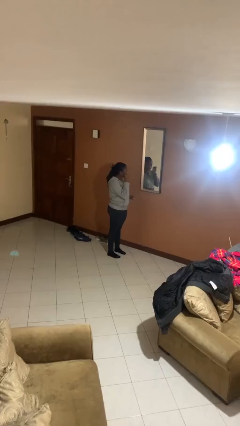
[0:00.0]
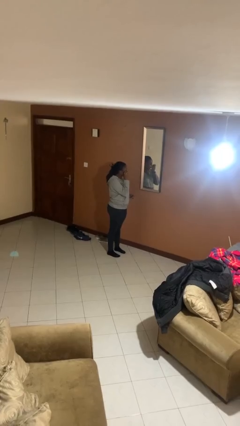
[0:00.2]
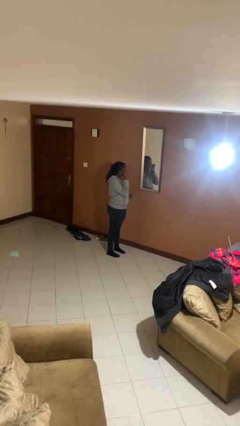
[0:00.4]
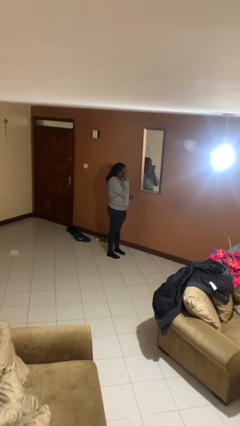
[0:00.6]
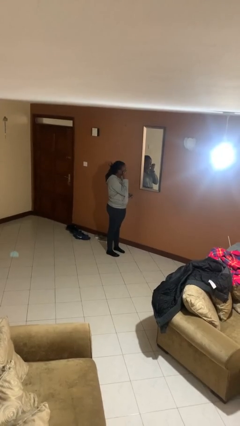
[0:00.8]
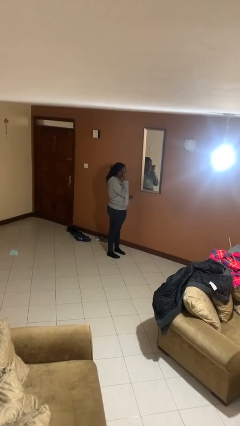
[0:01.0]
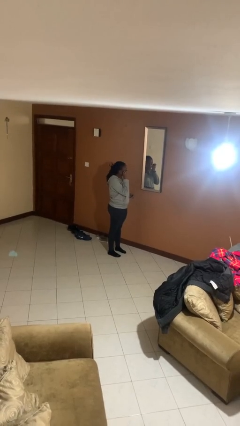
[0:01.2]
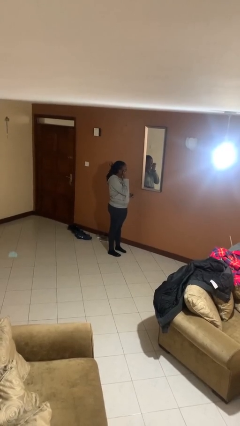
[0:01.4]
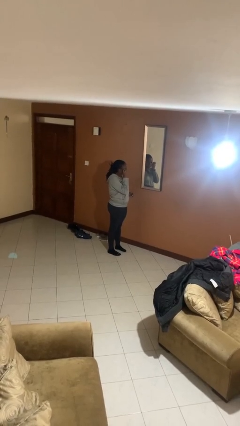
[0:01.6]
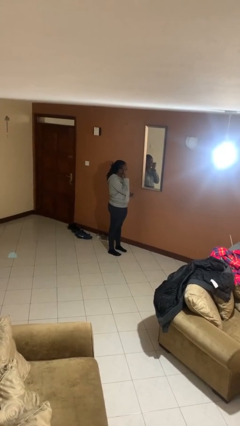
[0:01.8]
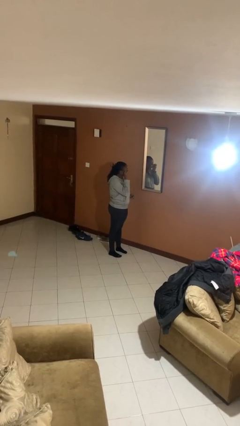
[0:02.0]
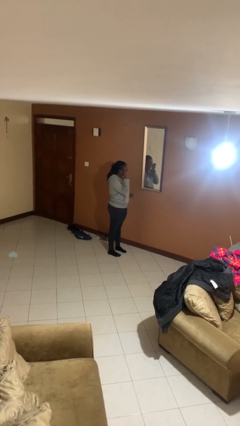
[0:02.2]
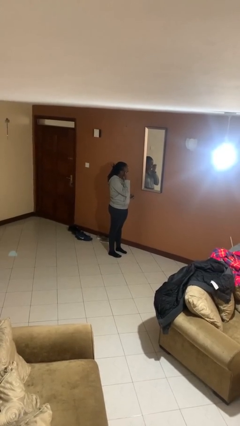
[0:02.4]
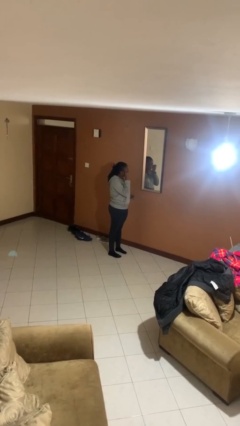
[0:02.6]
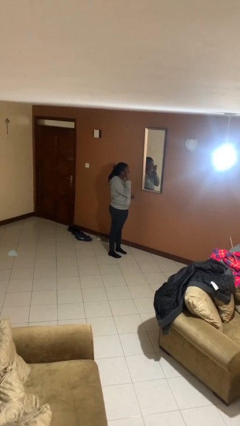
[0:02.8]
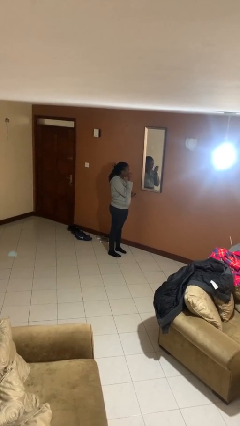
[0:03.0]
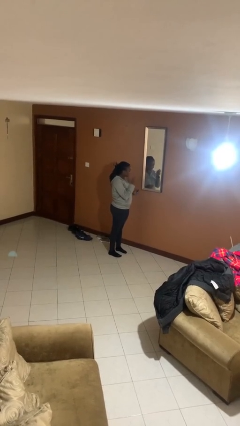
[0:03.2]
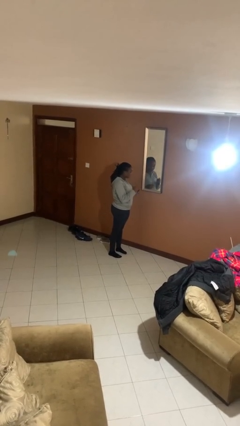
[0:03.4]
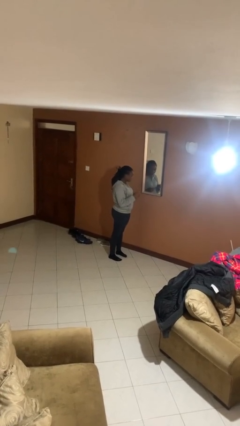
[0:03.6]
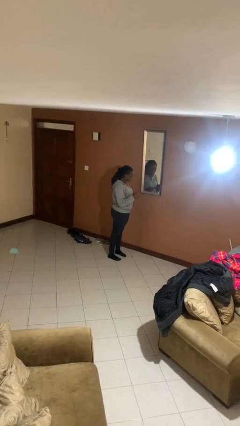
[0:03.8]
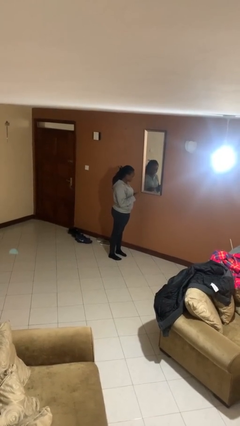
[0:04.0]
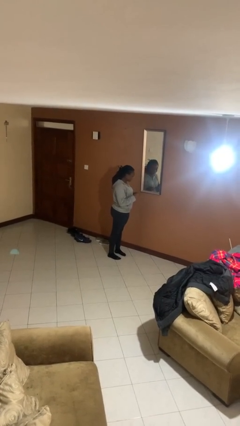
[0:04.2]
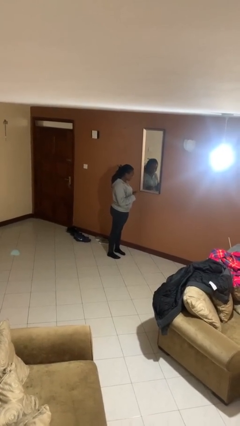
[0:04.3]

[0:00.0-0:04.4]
person applies eye makeup

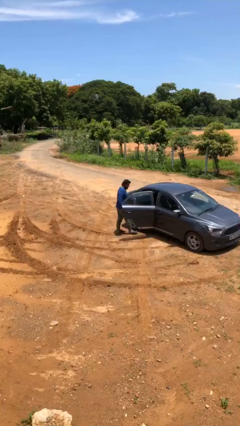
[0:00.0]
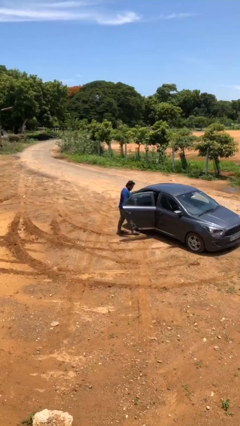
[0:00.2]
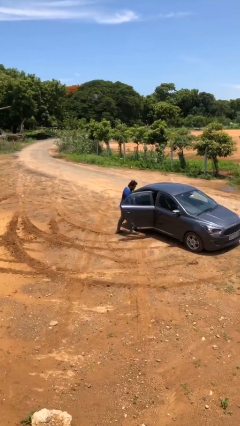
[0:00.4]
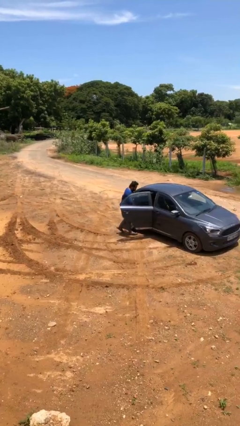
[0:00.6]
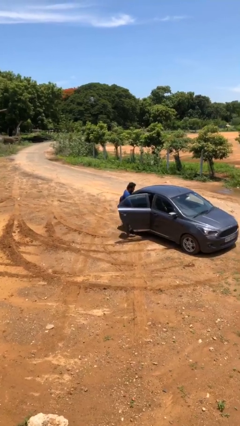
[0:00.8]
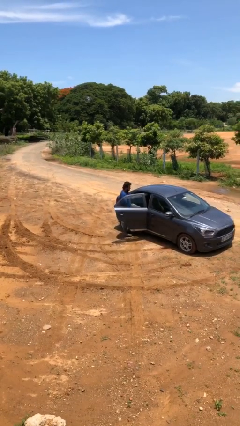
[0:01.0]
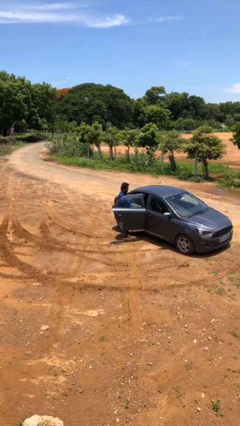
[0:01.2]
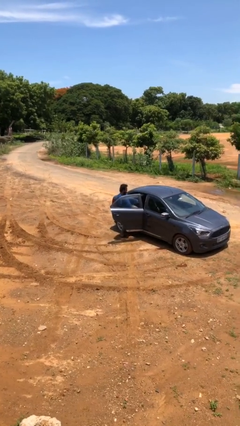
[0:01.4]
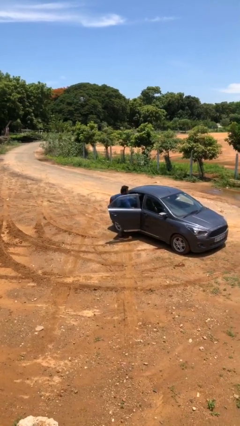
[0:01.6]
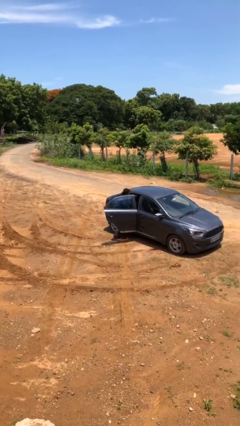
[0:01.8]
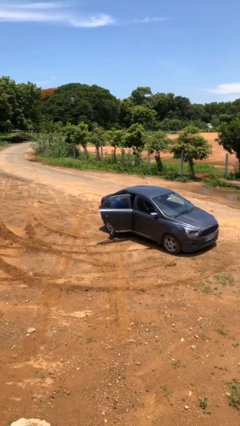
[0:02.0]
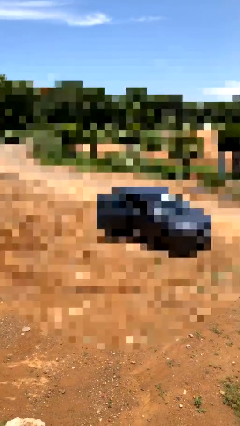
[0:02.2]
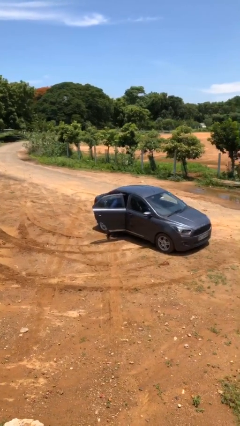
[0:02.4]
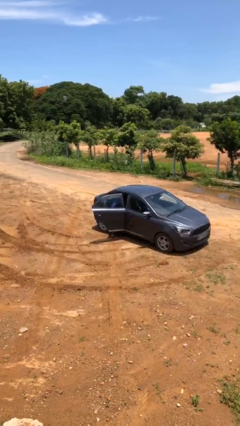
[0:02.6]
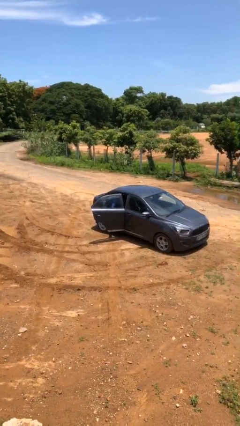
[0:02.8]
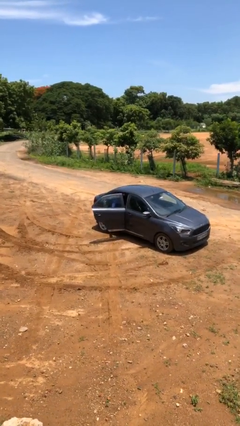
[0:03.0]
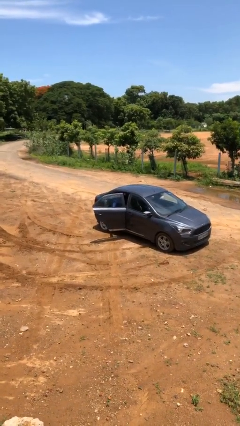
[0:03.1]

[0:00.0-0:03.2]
person enters car

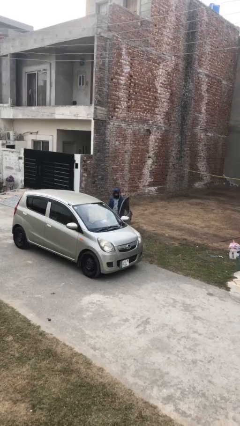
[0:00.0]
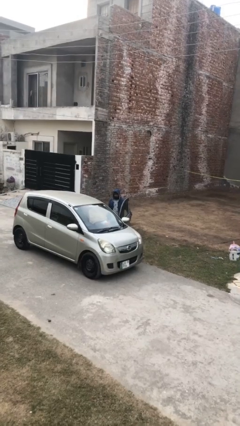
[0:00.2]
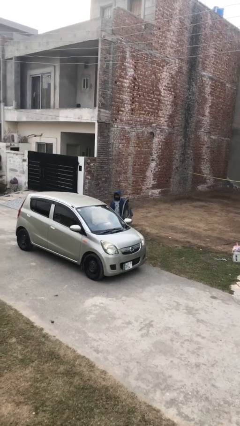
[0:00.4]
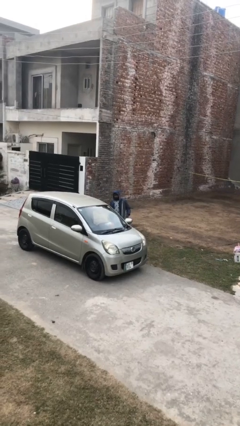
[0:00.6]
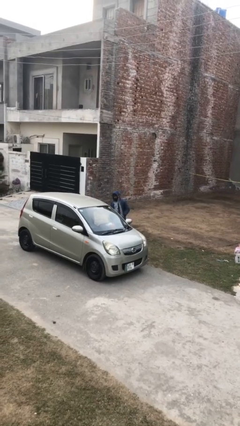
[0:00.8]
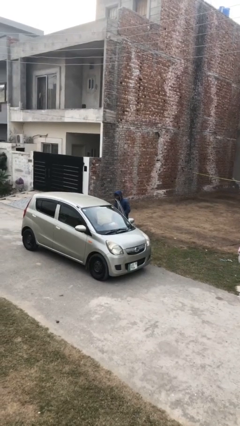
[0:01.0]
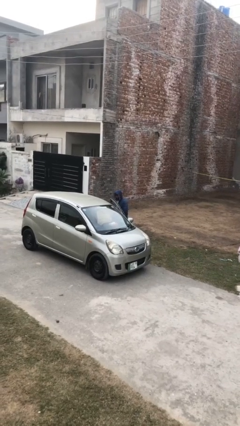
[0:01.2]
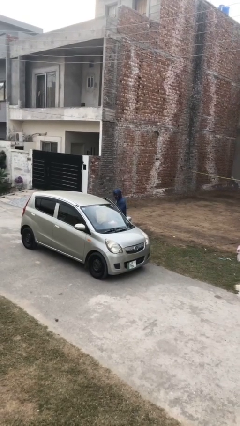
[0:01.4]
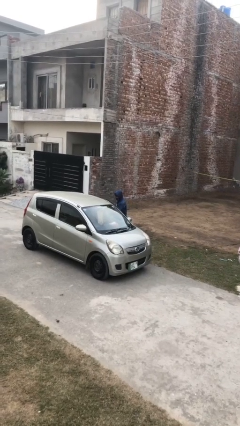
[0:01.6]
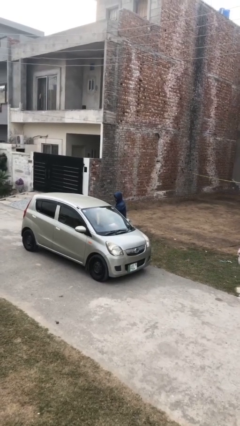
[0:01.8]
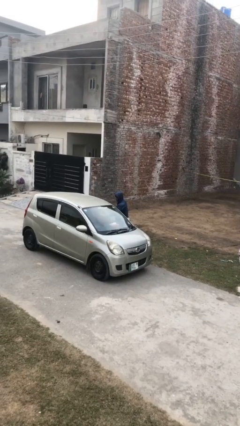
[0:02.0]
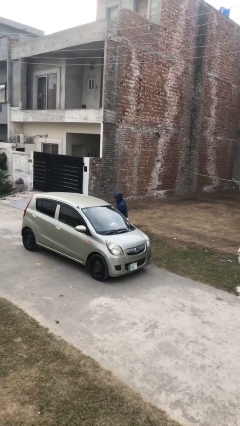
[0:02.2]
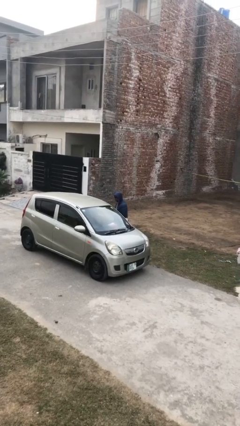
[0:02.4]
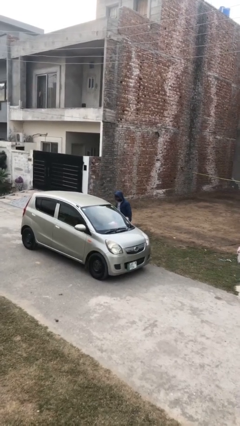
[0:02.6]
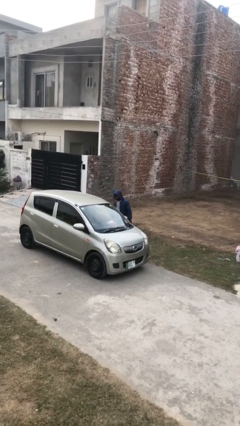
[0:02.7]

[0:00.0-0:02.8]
person closes car door

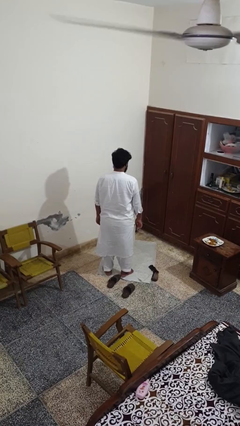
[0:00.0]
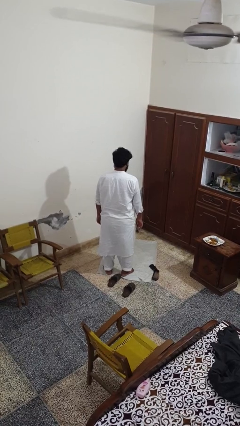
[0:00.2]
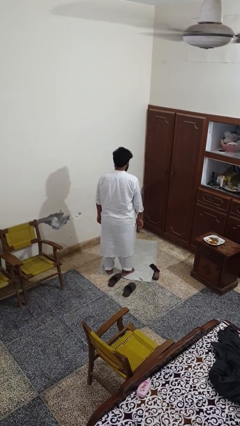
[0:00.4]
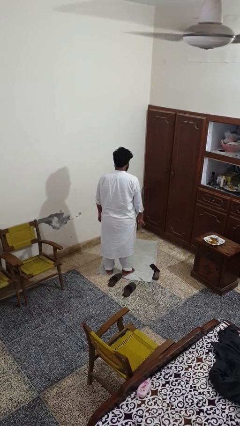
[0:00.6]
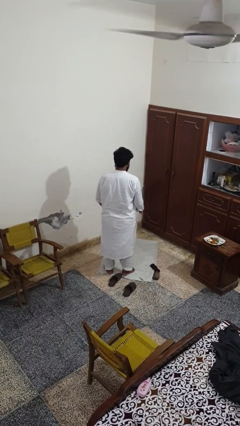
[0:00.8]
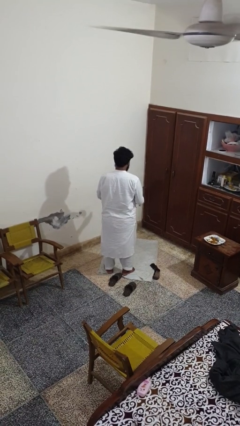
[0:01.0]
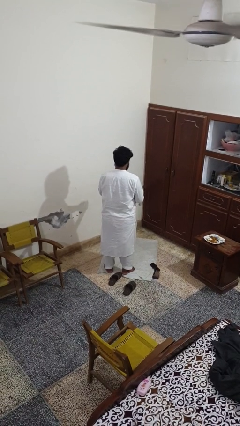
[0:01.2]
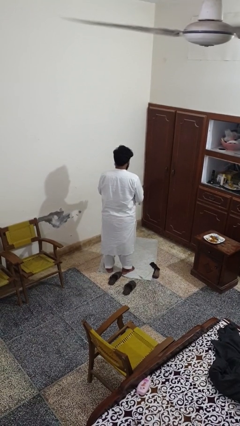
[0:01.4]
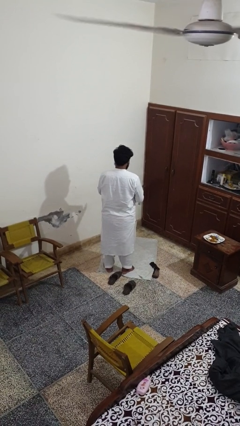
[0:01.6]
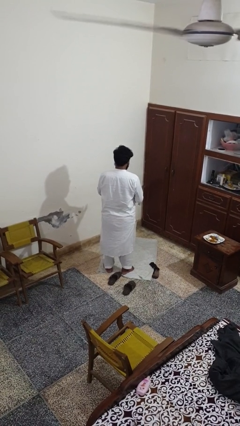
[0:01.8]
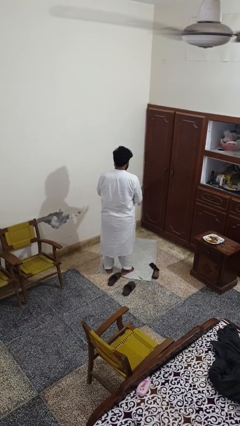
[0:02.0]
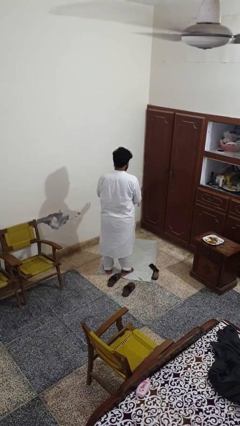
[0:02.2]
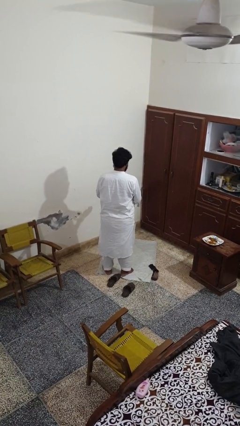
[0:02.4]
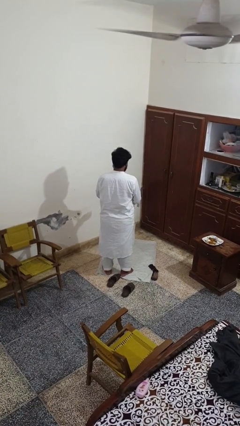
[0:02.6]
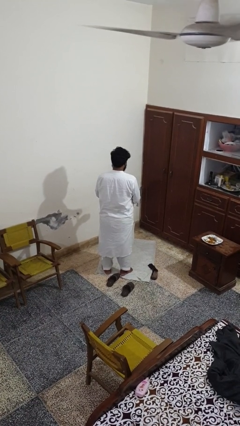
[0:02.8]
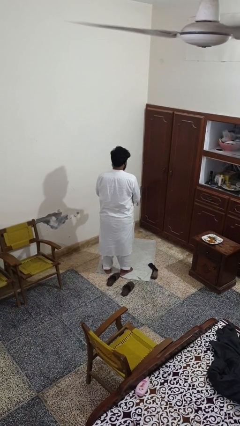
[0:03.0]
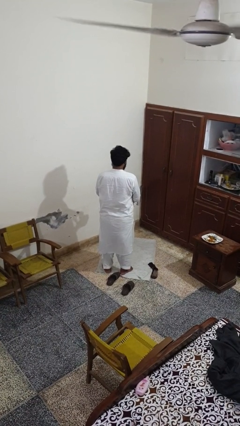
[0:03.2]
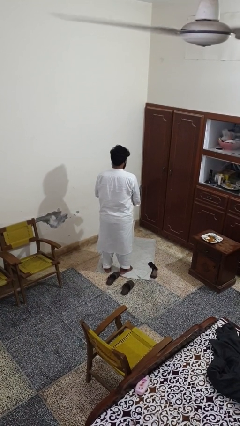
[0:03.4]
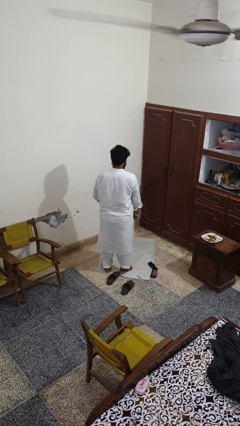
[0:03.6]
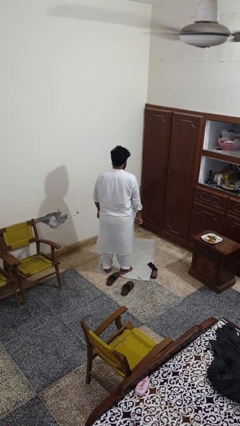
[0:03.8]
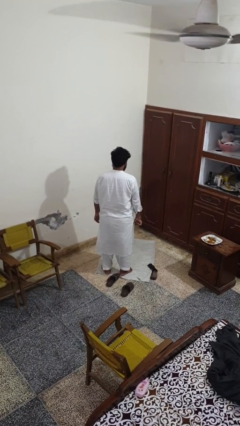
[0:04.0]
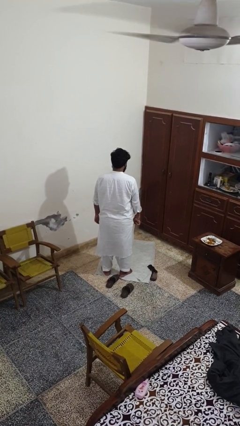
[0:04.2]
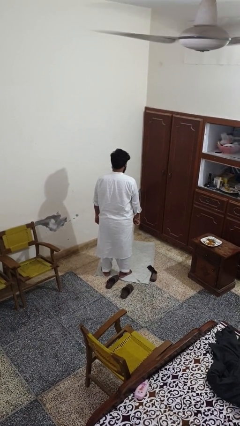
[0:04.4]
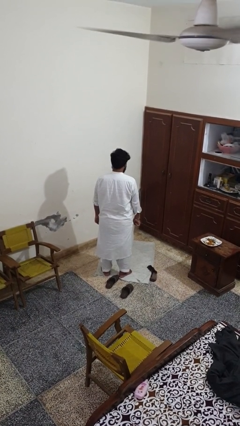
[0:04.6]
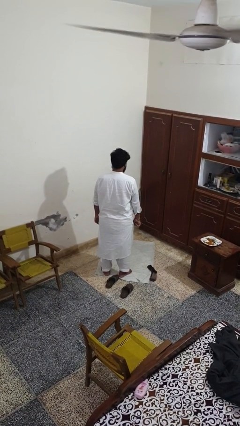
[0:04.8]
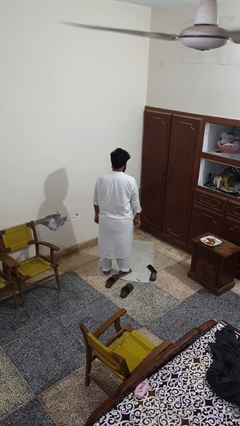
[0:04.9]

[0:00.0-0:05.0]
person puts on wristwatch

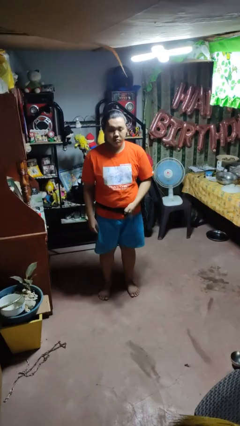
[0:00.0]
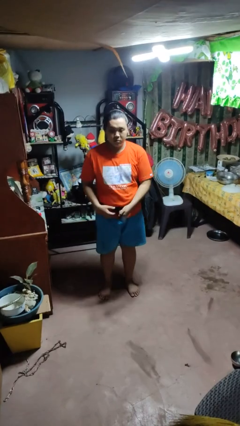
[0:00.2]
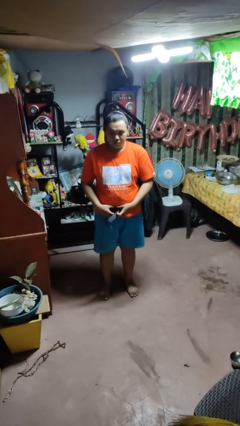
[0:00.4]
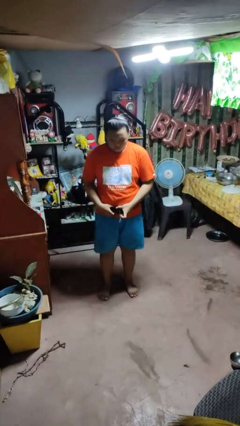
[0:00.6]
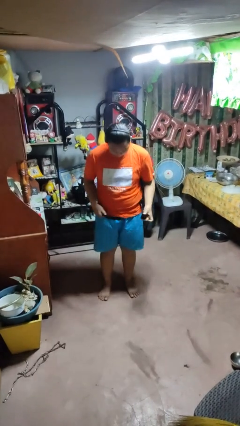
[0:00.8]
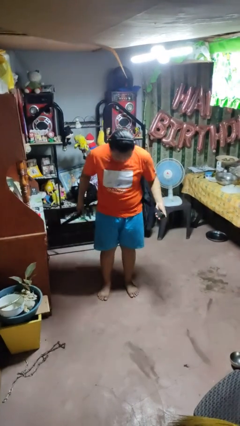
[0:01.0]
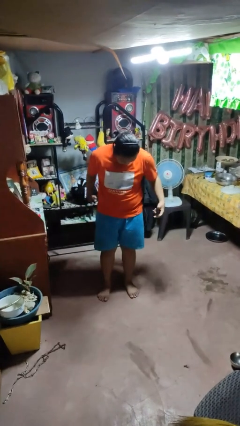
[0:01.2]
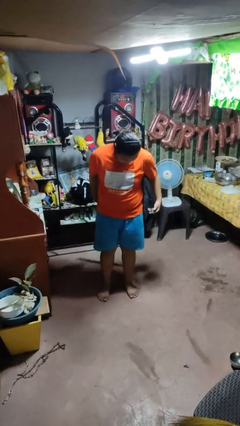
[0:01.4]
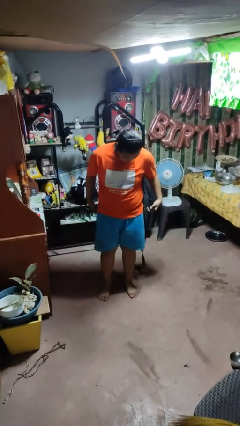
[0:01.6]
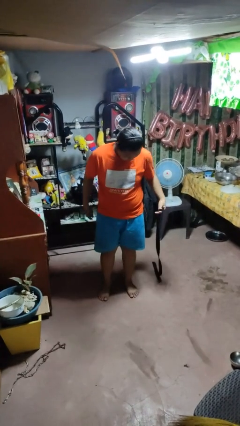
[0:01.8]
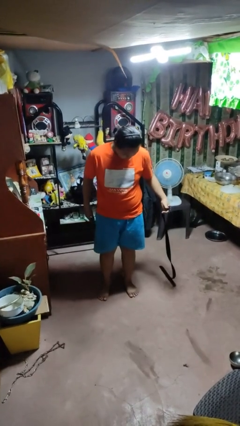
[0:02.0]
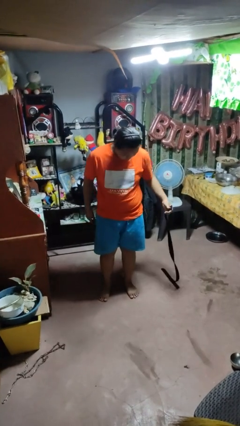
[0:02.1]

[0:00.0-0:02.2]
person takes off belt

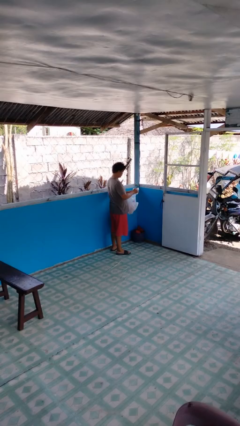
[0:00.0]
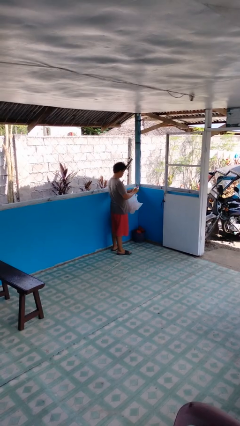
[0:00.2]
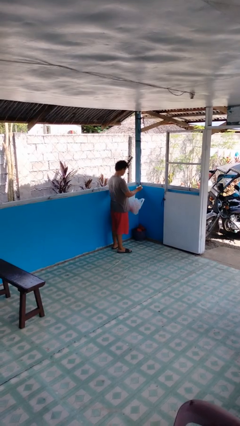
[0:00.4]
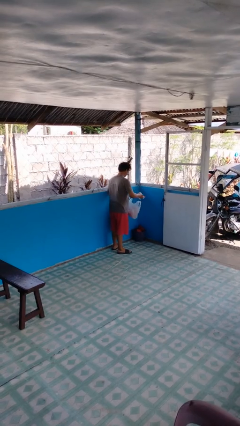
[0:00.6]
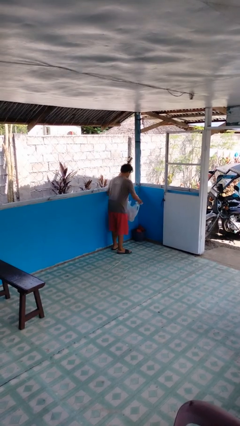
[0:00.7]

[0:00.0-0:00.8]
person discards trash
